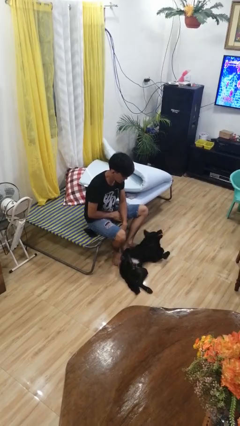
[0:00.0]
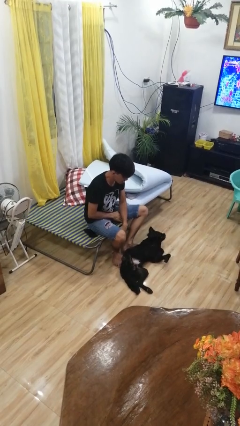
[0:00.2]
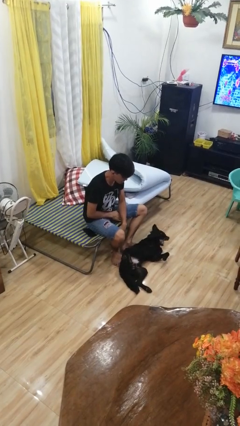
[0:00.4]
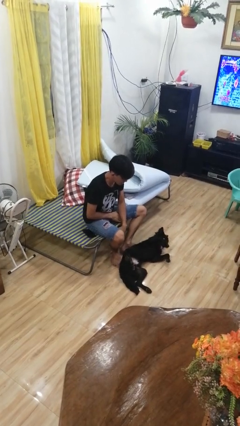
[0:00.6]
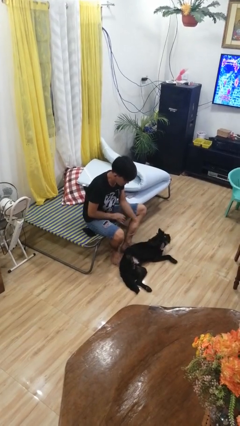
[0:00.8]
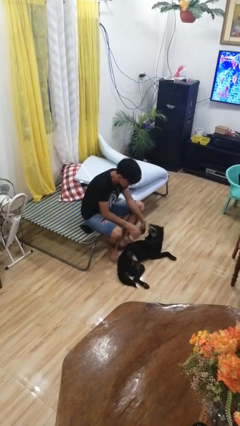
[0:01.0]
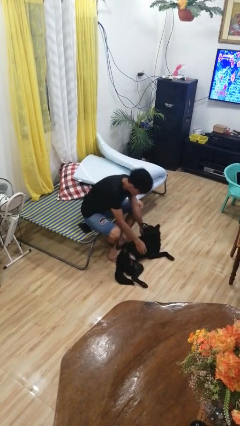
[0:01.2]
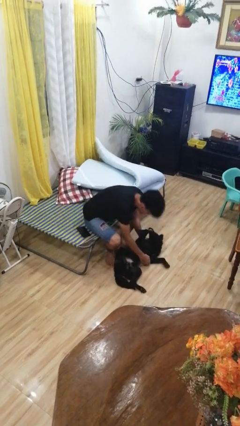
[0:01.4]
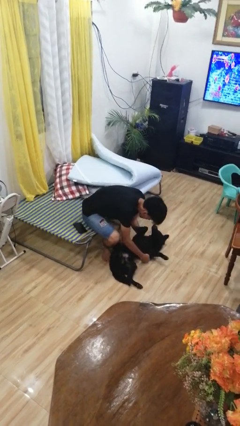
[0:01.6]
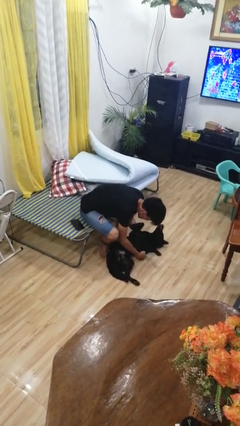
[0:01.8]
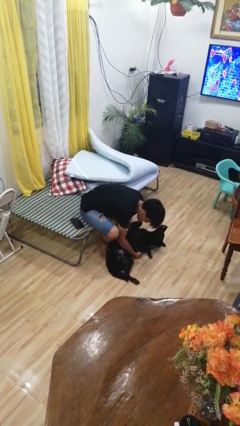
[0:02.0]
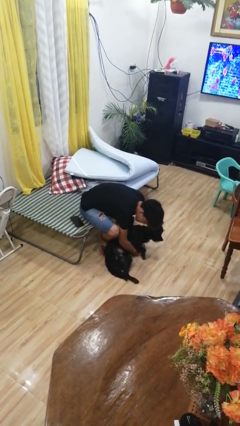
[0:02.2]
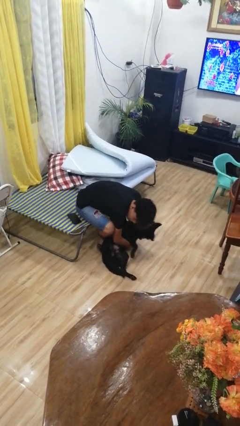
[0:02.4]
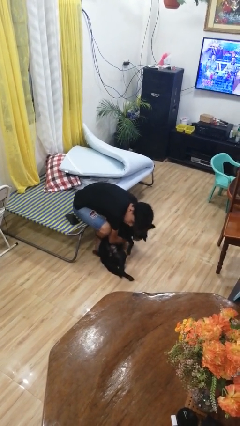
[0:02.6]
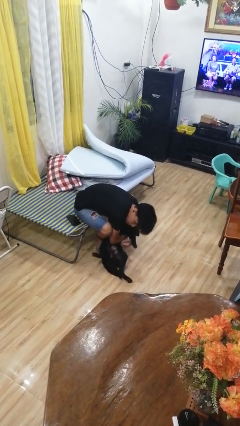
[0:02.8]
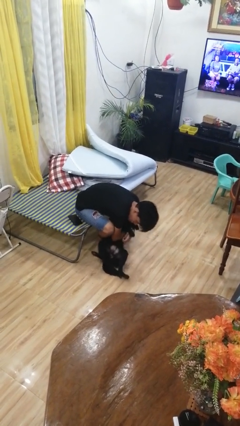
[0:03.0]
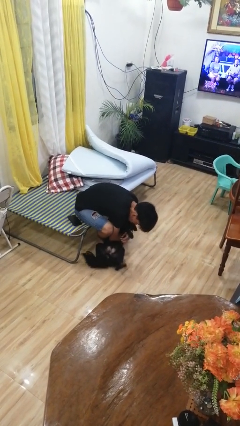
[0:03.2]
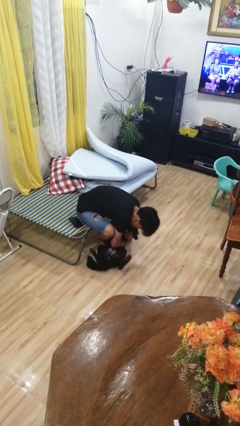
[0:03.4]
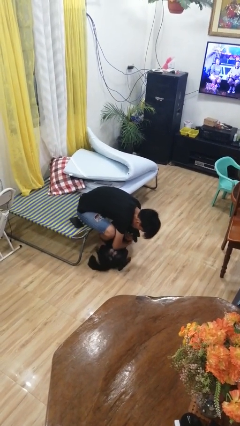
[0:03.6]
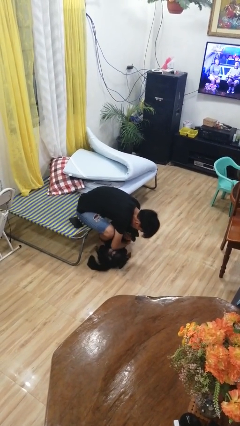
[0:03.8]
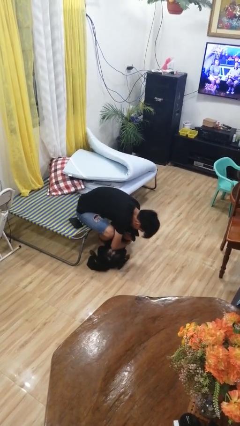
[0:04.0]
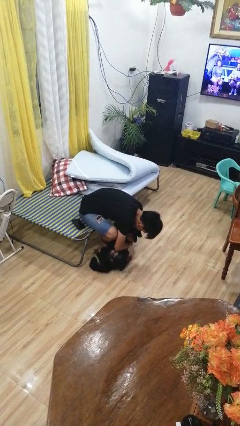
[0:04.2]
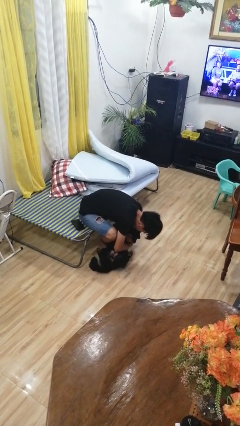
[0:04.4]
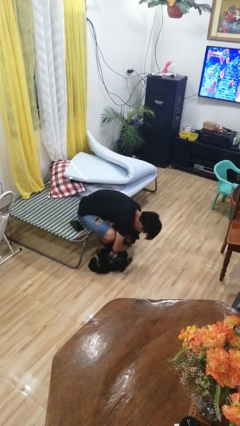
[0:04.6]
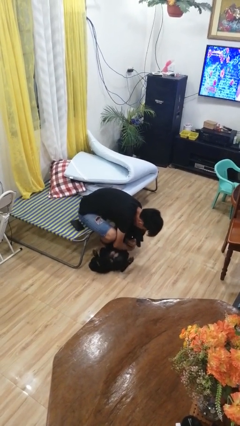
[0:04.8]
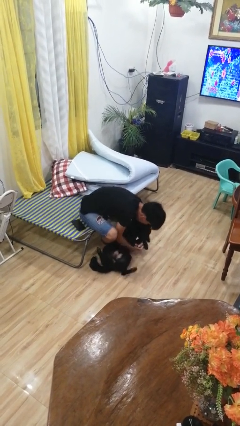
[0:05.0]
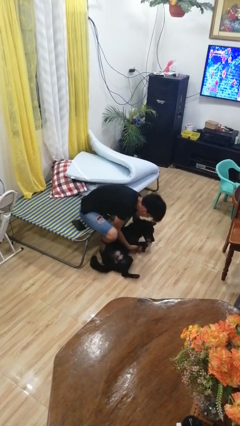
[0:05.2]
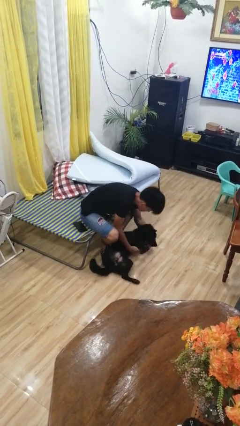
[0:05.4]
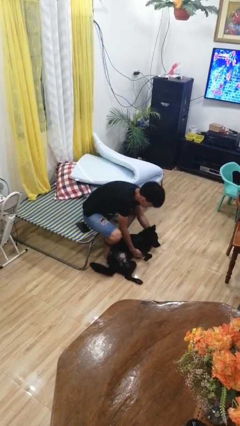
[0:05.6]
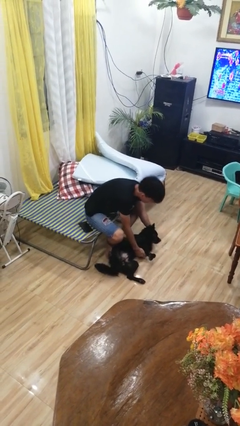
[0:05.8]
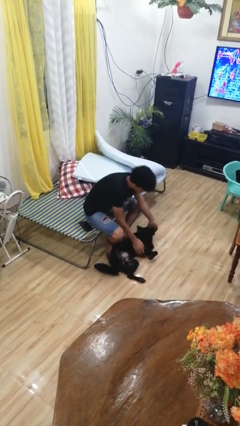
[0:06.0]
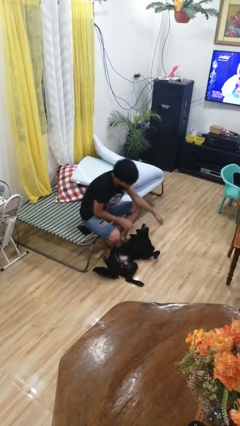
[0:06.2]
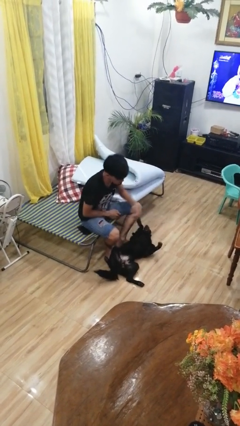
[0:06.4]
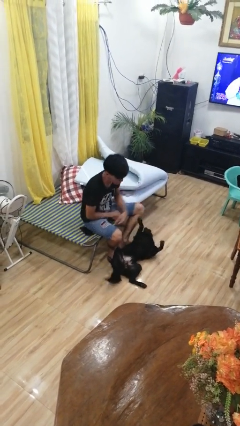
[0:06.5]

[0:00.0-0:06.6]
person hugs dog

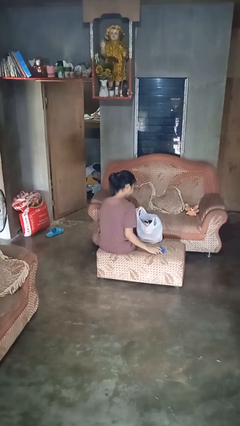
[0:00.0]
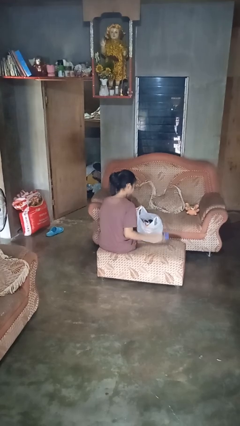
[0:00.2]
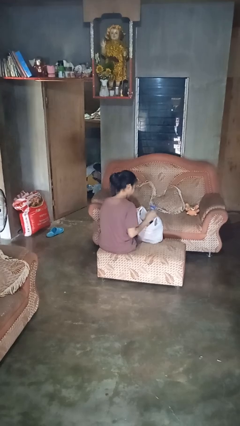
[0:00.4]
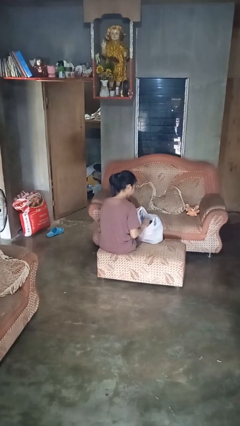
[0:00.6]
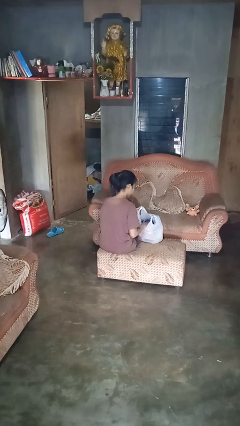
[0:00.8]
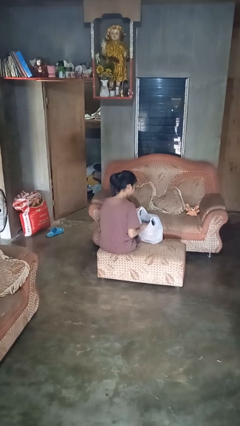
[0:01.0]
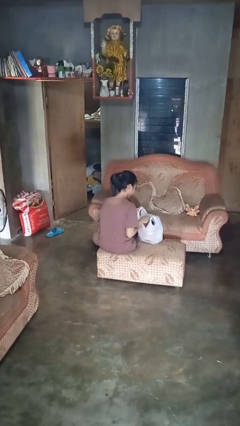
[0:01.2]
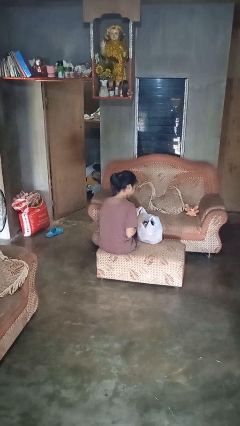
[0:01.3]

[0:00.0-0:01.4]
person puts object into bag

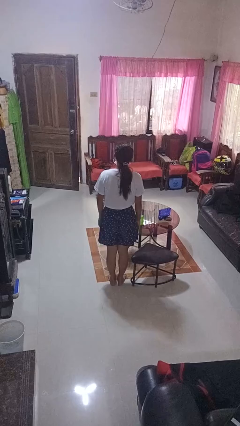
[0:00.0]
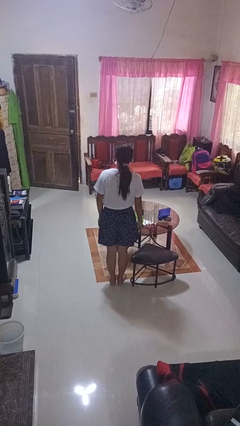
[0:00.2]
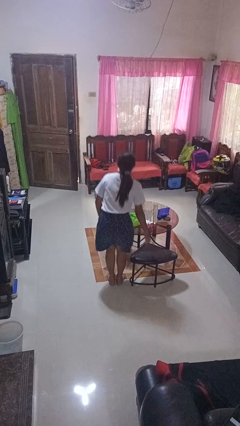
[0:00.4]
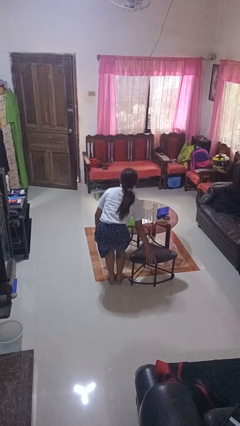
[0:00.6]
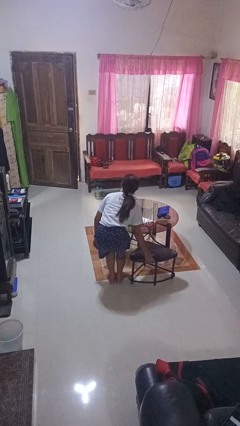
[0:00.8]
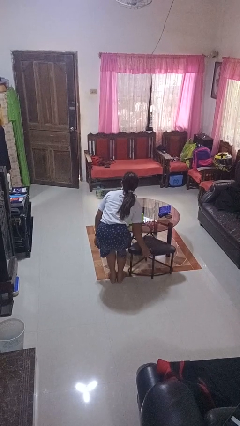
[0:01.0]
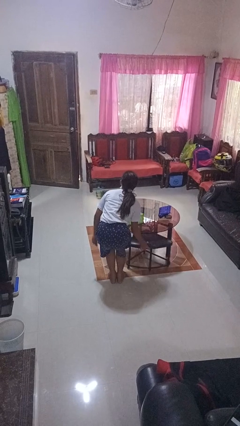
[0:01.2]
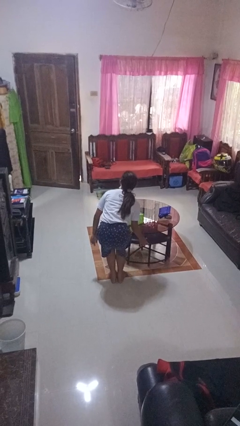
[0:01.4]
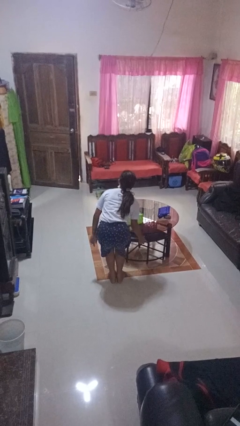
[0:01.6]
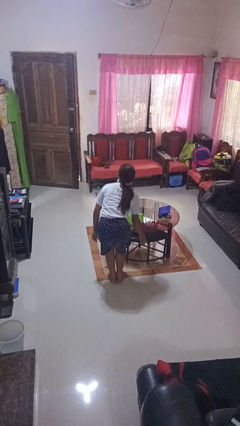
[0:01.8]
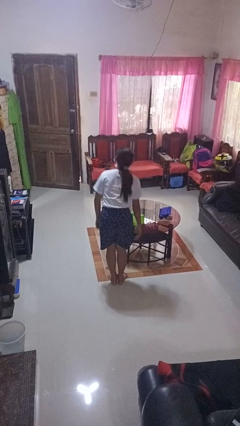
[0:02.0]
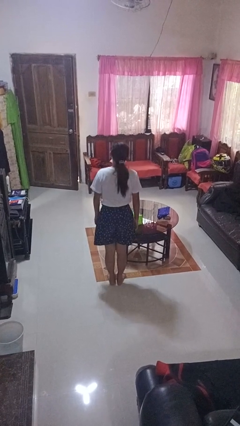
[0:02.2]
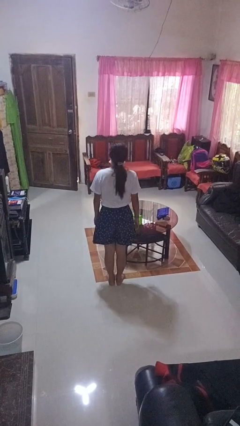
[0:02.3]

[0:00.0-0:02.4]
person pushes in chair

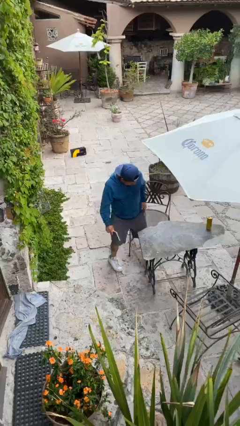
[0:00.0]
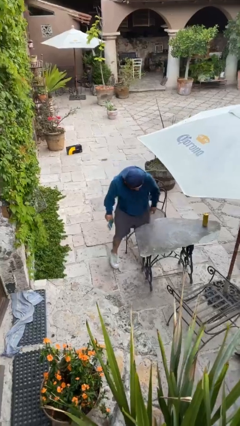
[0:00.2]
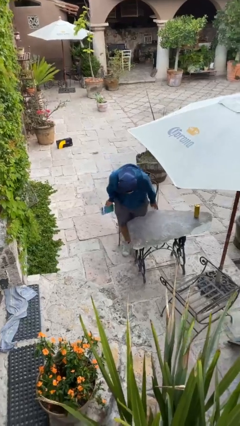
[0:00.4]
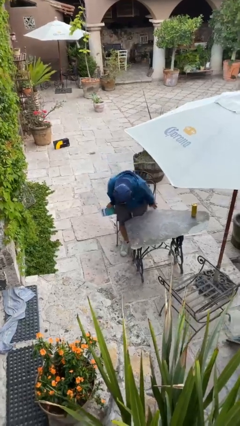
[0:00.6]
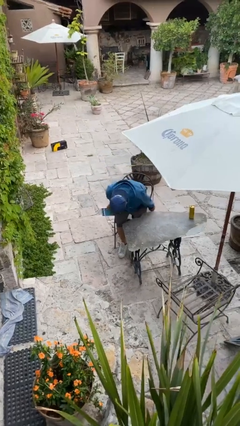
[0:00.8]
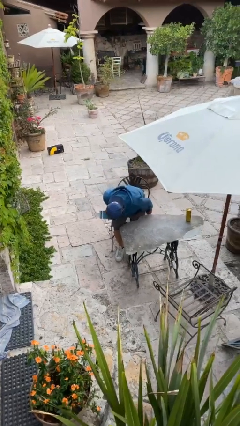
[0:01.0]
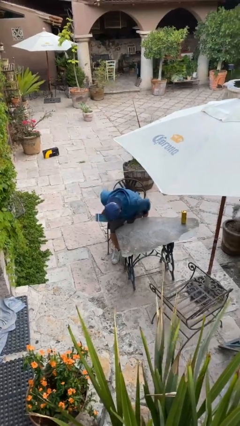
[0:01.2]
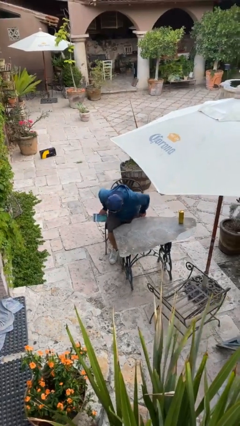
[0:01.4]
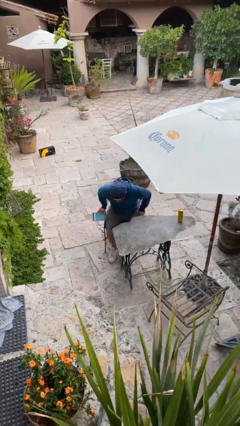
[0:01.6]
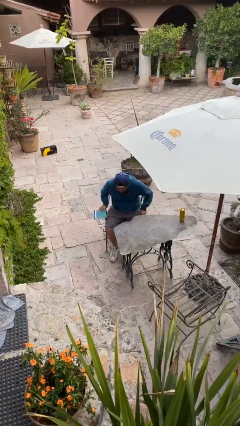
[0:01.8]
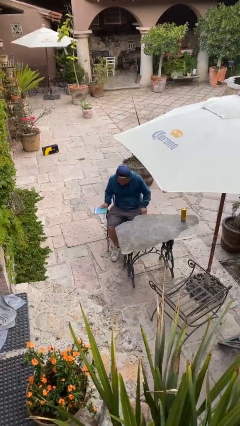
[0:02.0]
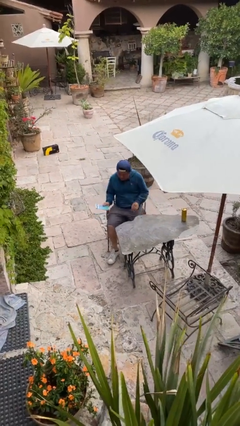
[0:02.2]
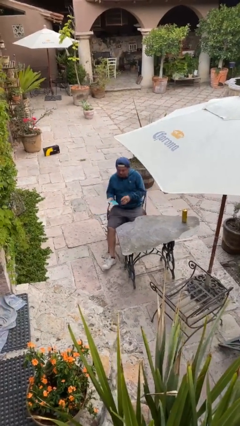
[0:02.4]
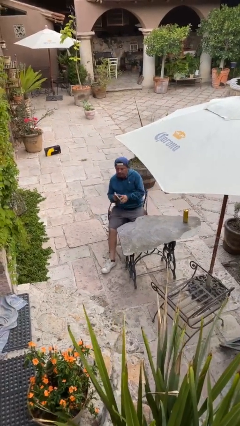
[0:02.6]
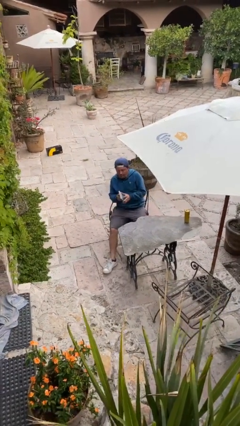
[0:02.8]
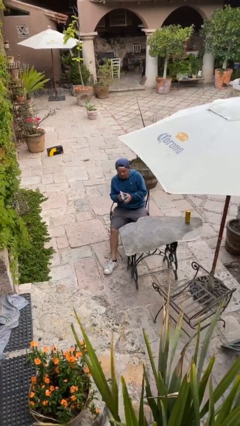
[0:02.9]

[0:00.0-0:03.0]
person sits down

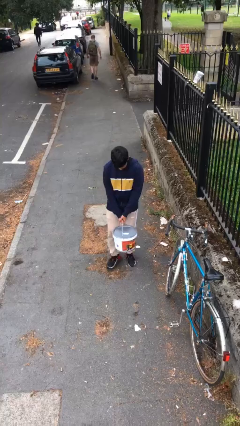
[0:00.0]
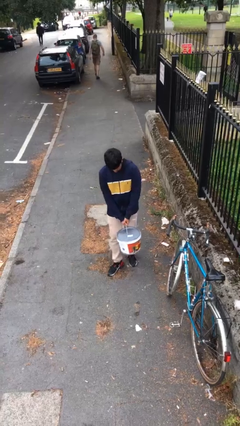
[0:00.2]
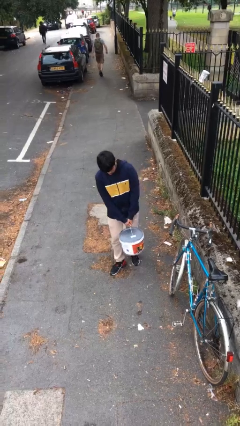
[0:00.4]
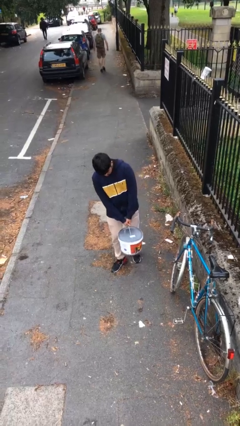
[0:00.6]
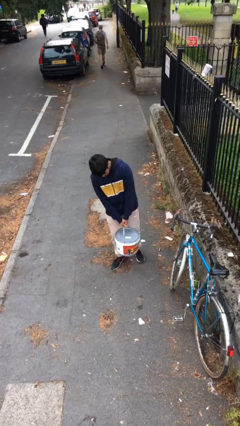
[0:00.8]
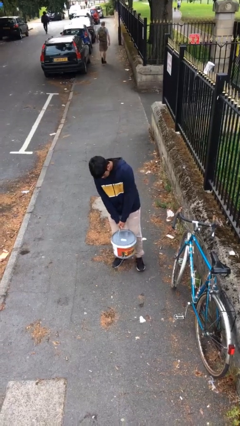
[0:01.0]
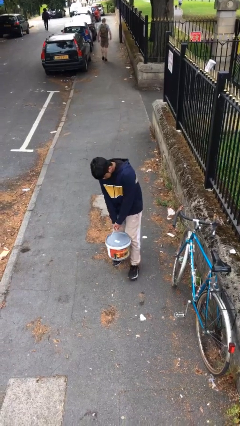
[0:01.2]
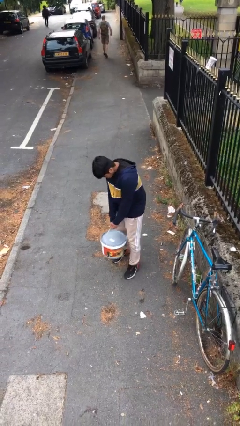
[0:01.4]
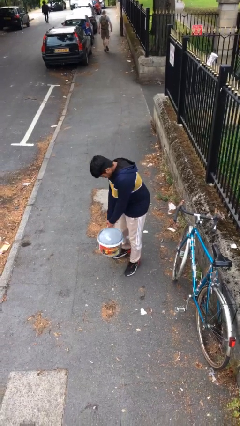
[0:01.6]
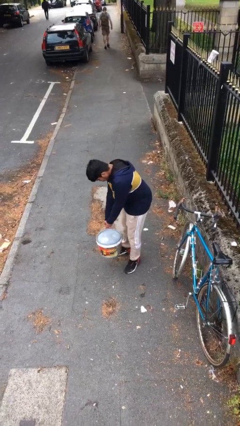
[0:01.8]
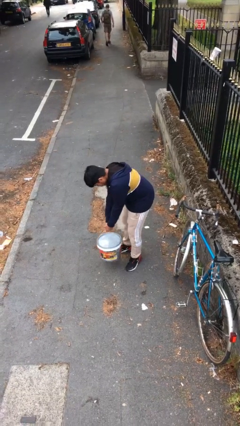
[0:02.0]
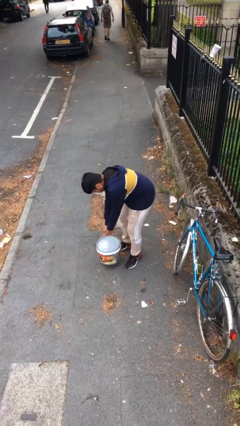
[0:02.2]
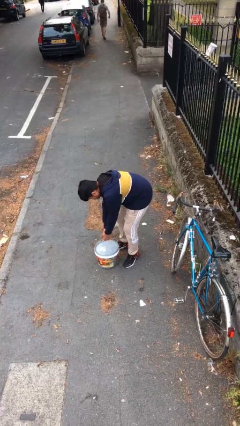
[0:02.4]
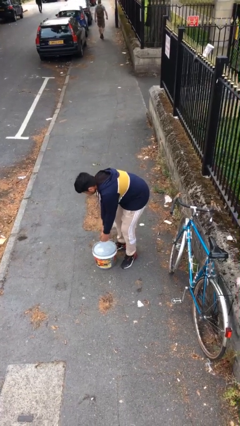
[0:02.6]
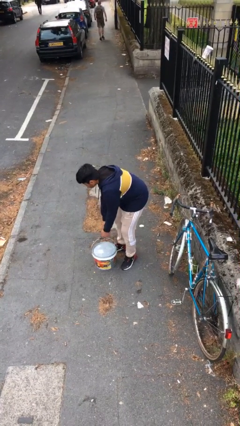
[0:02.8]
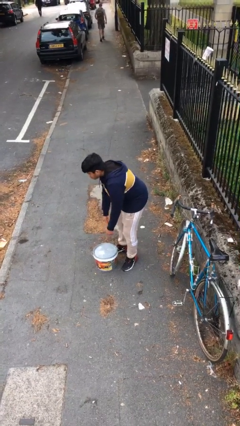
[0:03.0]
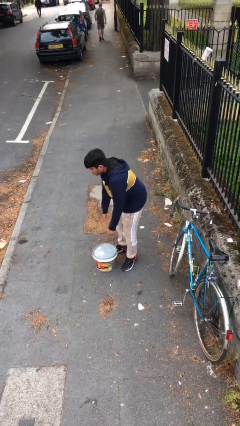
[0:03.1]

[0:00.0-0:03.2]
person puts down object on floor

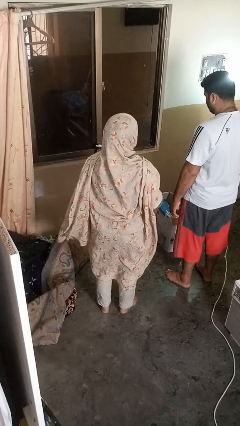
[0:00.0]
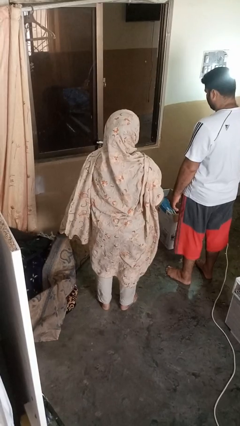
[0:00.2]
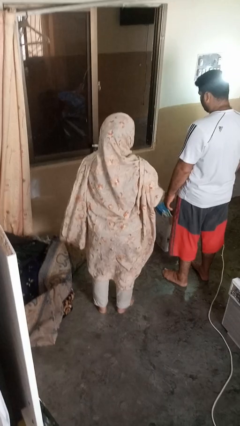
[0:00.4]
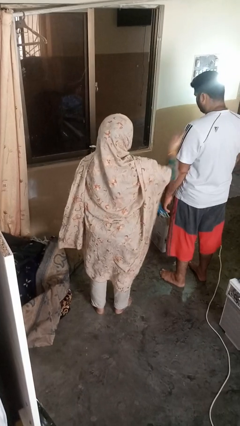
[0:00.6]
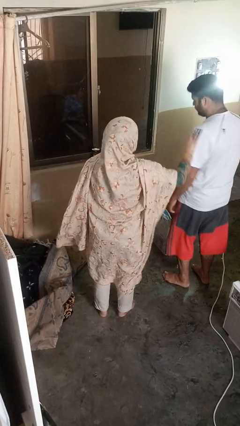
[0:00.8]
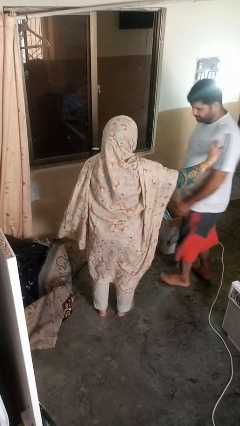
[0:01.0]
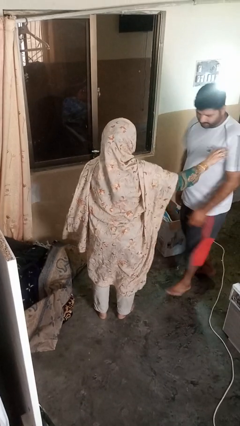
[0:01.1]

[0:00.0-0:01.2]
person grabs person by shoulder
